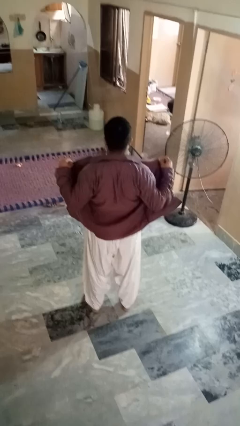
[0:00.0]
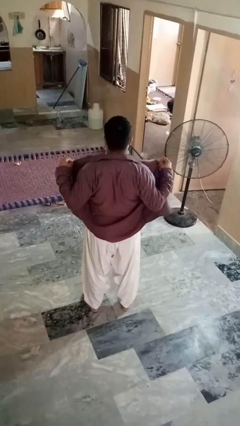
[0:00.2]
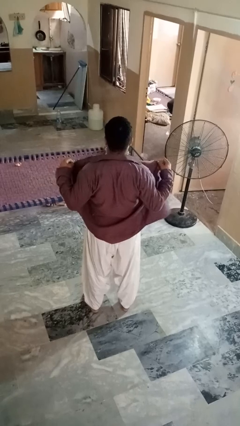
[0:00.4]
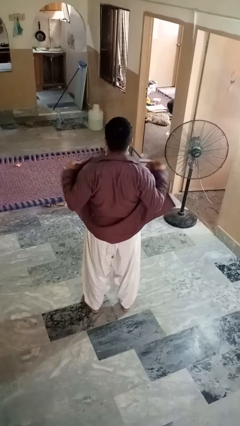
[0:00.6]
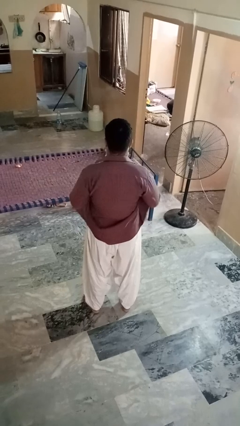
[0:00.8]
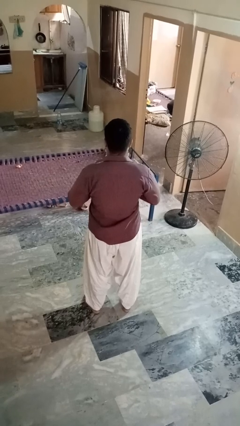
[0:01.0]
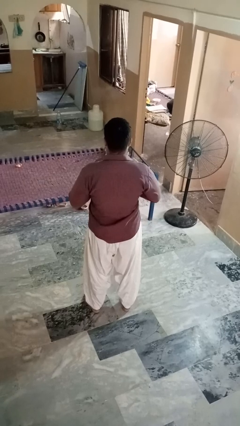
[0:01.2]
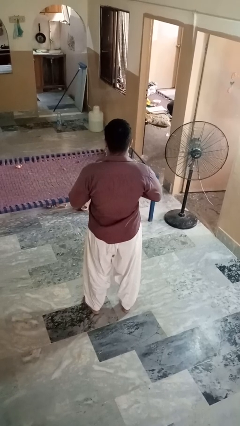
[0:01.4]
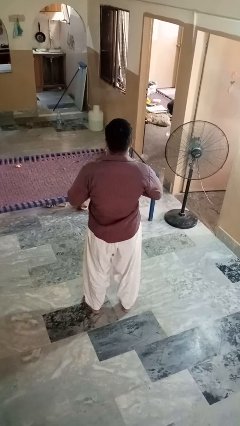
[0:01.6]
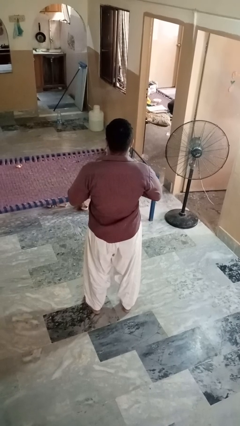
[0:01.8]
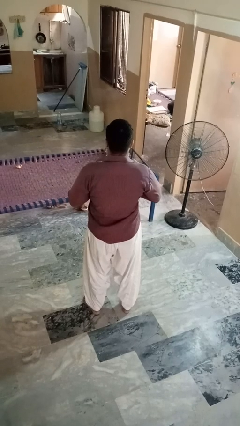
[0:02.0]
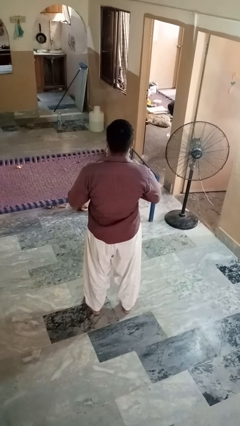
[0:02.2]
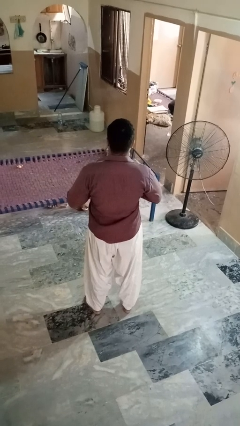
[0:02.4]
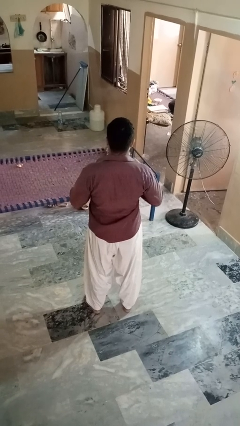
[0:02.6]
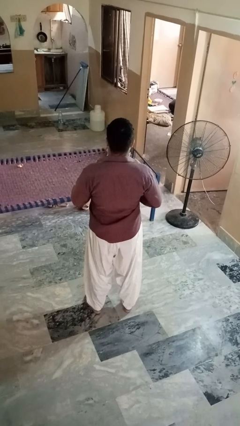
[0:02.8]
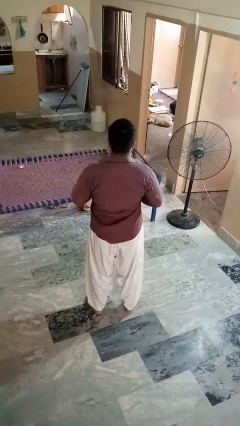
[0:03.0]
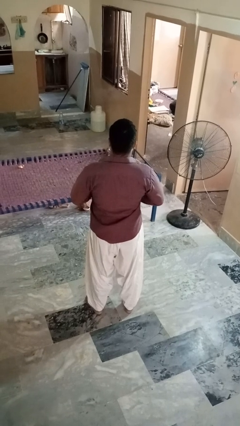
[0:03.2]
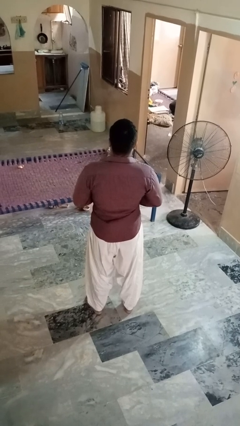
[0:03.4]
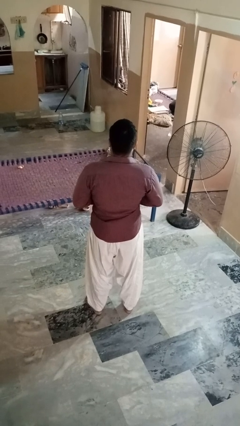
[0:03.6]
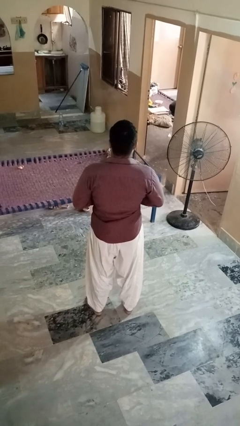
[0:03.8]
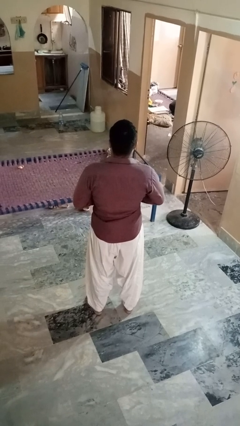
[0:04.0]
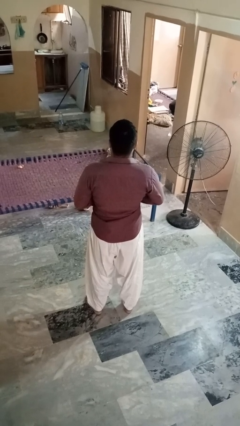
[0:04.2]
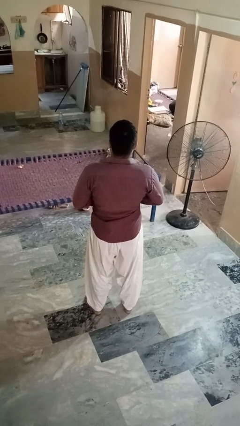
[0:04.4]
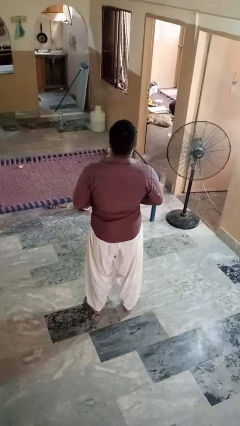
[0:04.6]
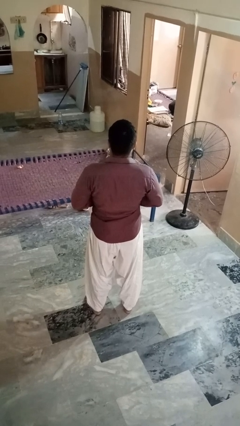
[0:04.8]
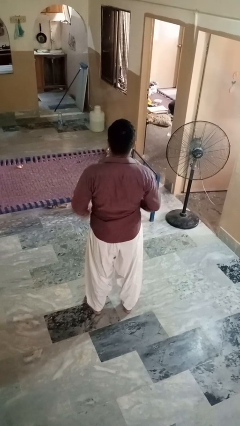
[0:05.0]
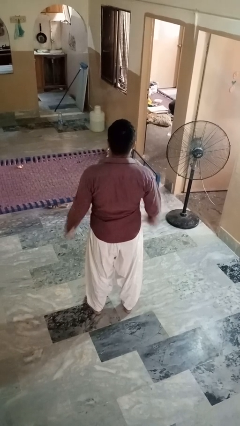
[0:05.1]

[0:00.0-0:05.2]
person buttons shirt

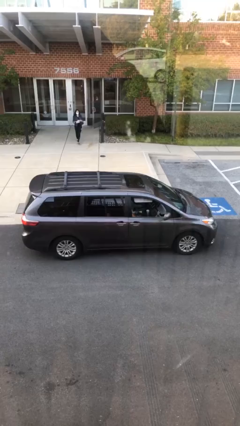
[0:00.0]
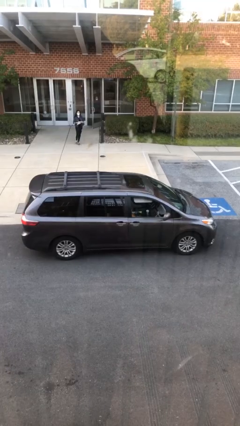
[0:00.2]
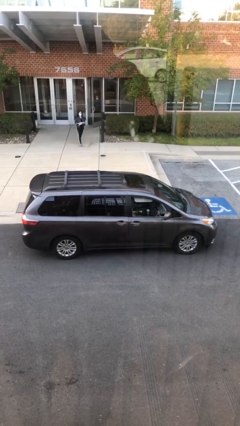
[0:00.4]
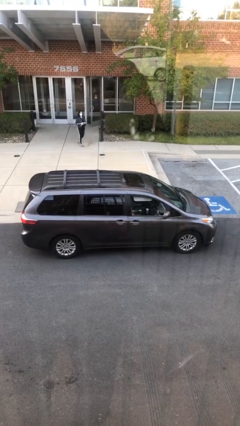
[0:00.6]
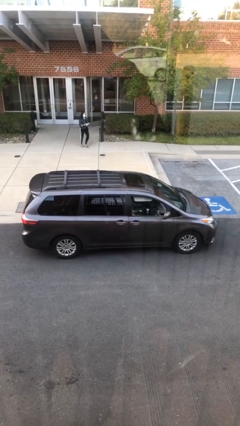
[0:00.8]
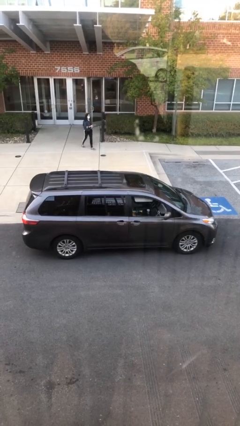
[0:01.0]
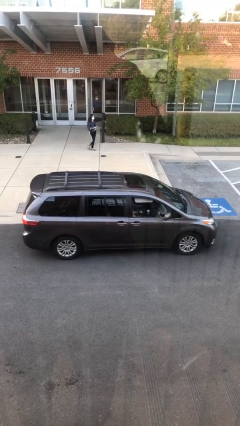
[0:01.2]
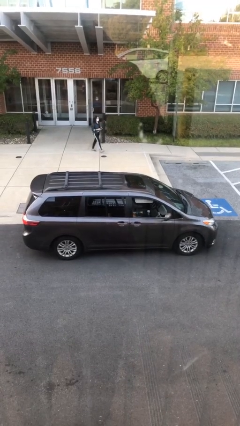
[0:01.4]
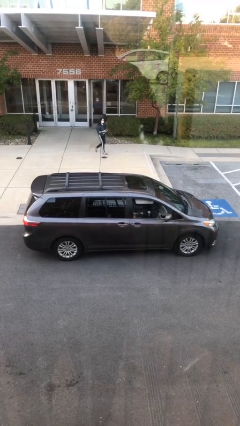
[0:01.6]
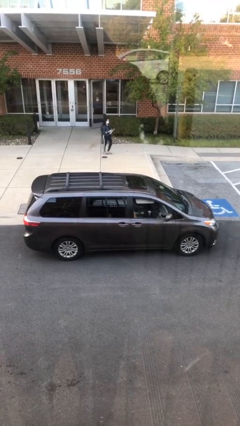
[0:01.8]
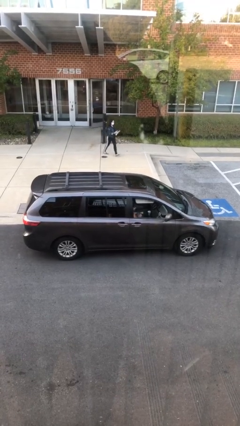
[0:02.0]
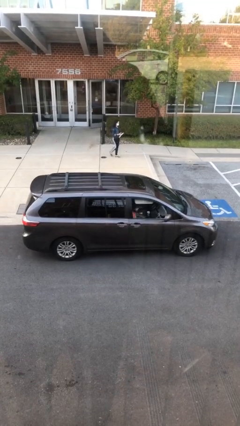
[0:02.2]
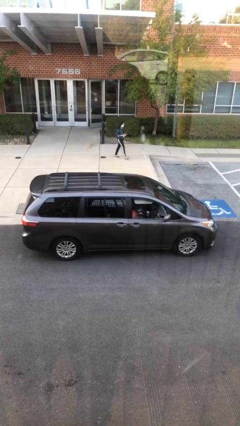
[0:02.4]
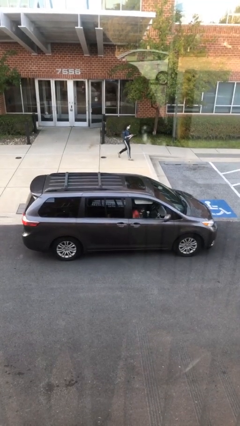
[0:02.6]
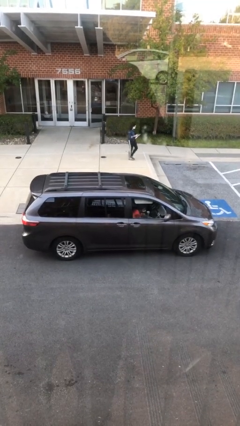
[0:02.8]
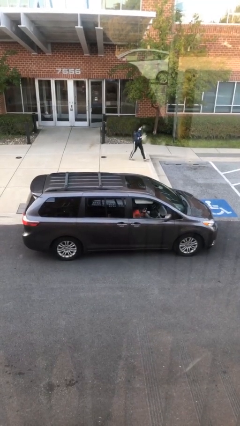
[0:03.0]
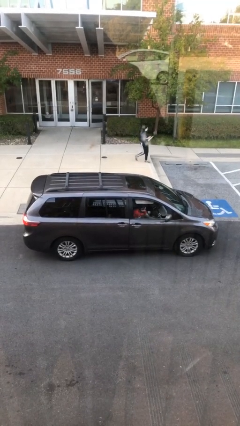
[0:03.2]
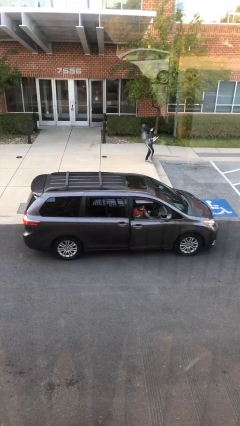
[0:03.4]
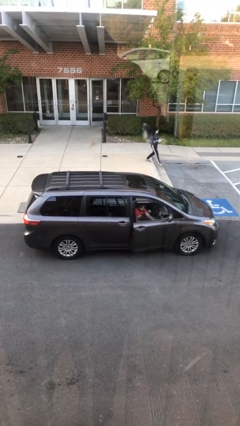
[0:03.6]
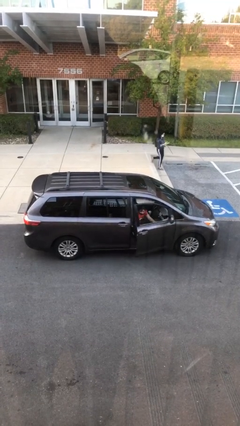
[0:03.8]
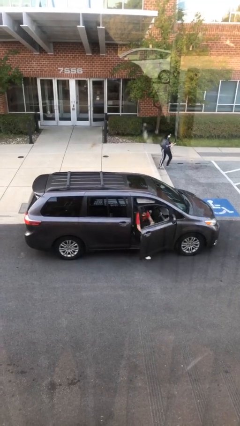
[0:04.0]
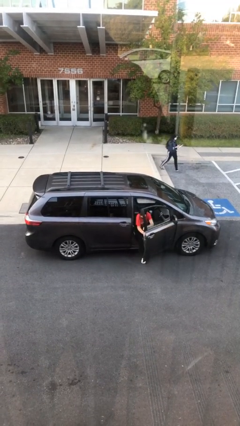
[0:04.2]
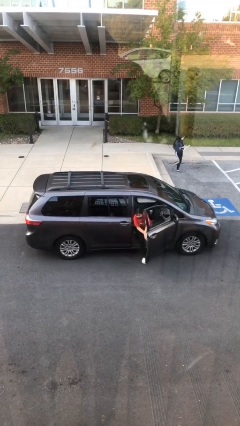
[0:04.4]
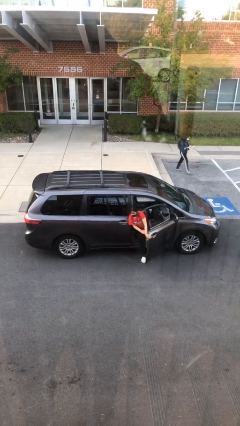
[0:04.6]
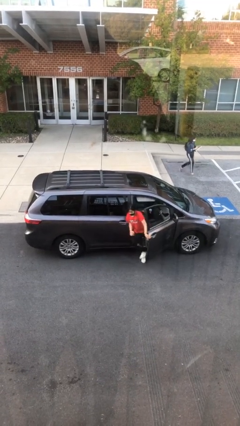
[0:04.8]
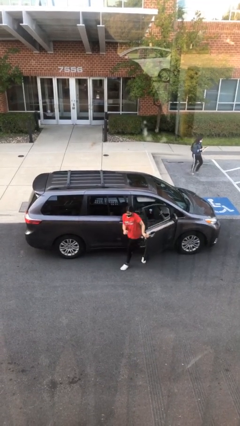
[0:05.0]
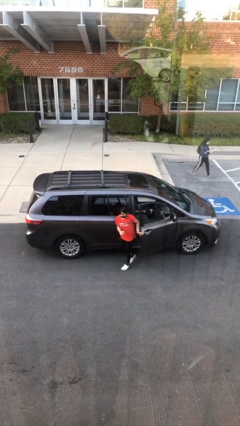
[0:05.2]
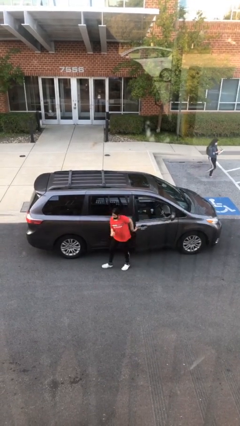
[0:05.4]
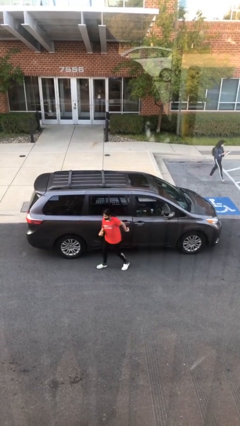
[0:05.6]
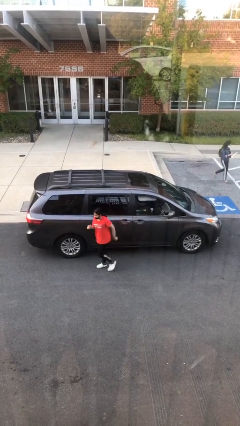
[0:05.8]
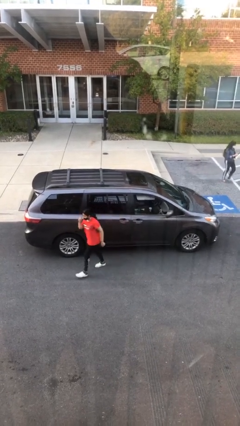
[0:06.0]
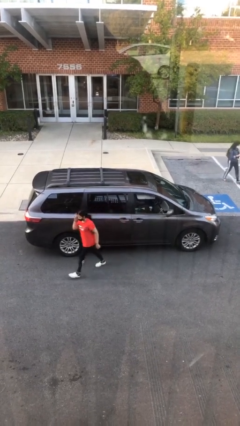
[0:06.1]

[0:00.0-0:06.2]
car drops off person

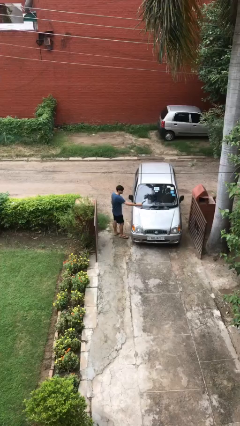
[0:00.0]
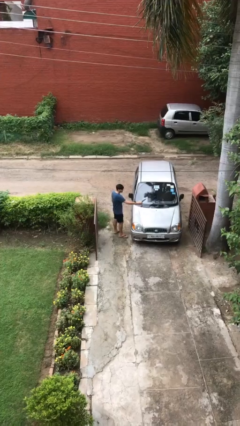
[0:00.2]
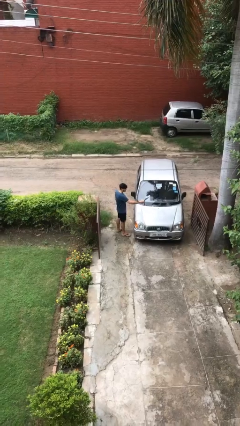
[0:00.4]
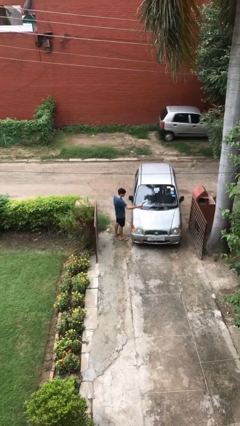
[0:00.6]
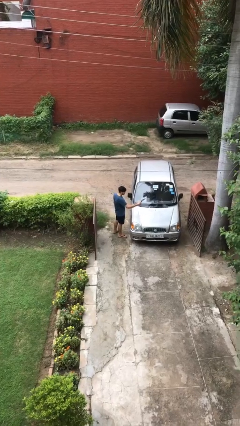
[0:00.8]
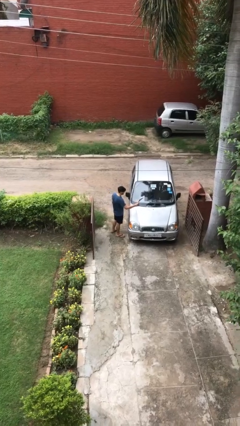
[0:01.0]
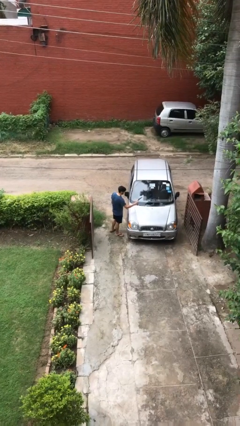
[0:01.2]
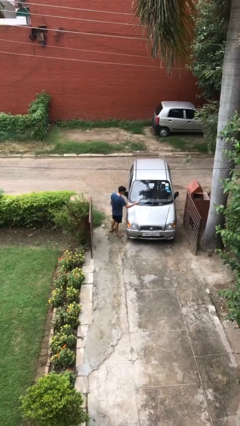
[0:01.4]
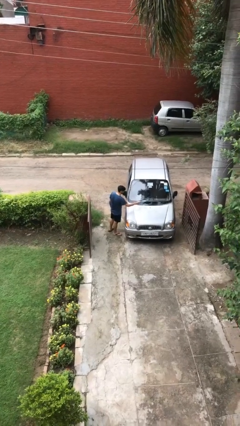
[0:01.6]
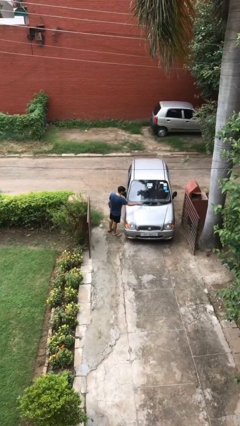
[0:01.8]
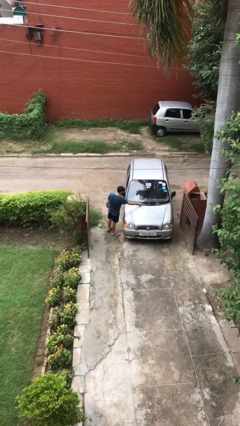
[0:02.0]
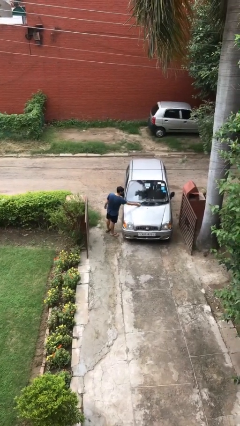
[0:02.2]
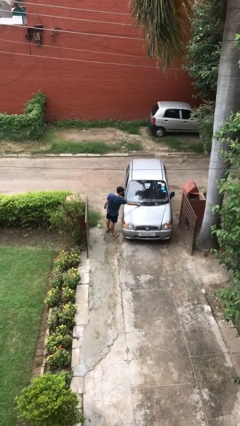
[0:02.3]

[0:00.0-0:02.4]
person flips down car wipers

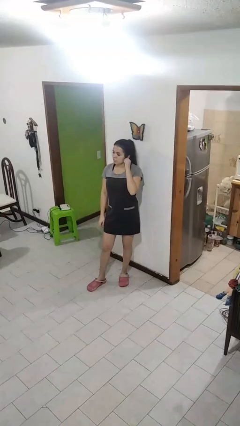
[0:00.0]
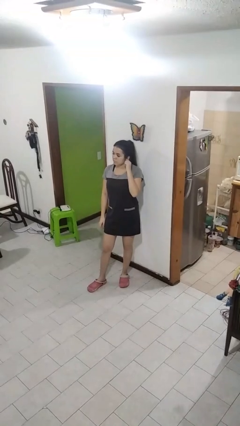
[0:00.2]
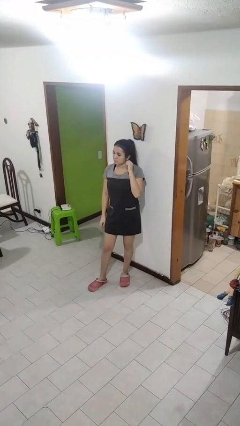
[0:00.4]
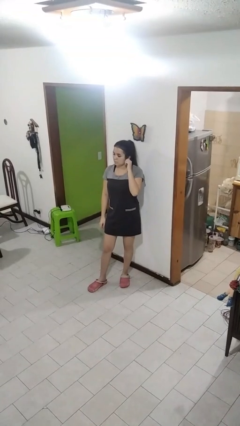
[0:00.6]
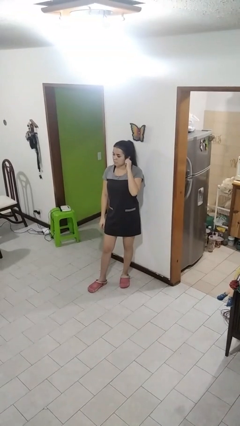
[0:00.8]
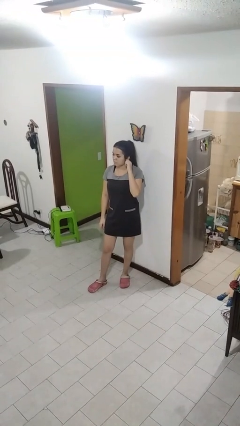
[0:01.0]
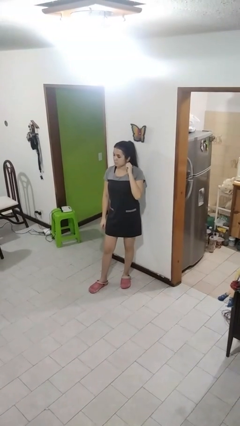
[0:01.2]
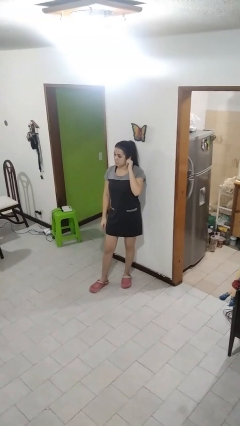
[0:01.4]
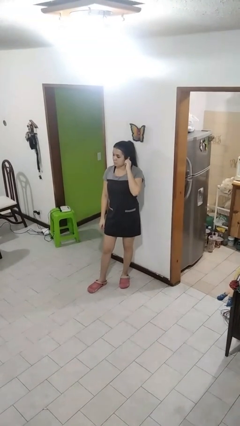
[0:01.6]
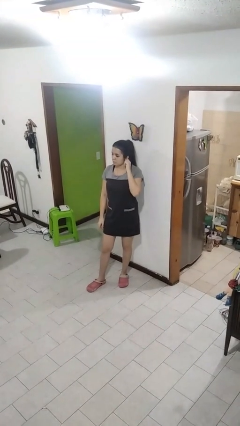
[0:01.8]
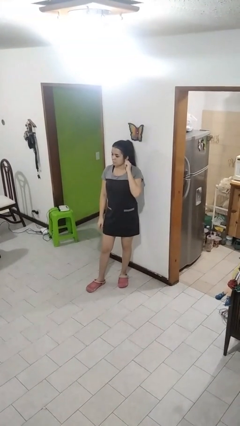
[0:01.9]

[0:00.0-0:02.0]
person touches earlobe

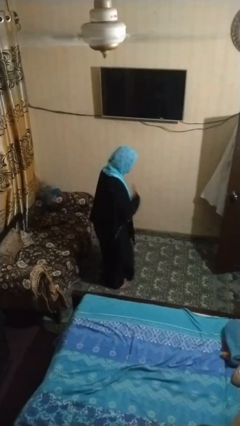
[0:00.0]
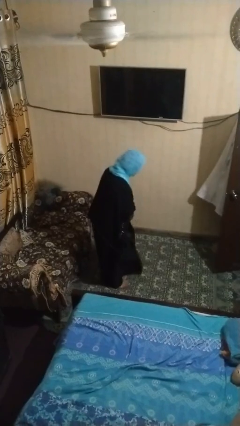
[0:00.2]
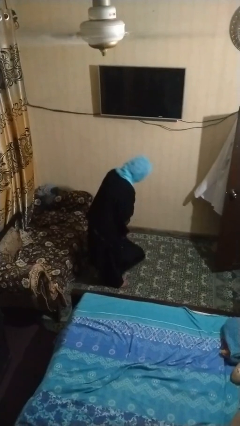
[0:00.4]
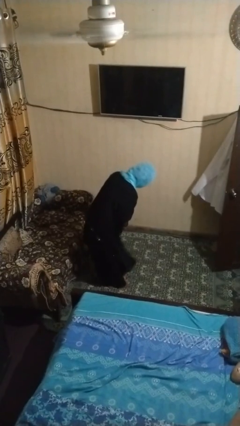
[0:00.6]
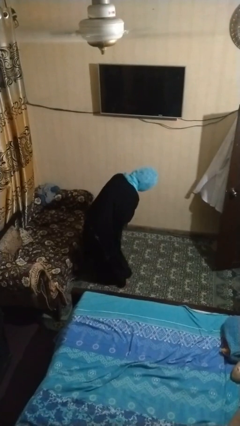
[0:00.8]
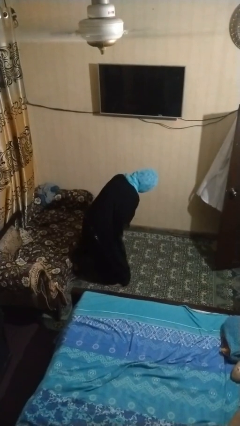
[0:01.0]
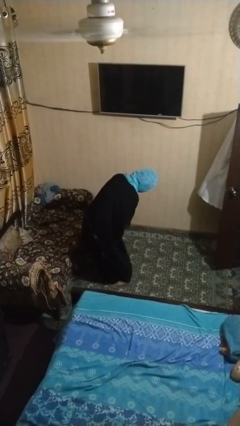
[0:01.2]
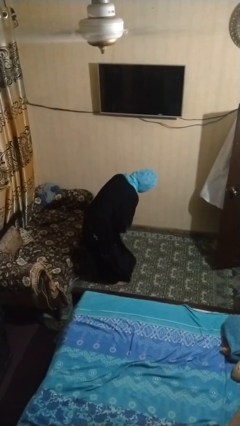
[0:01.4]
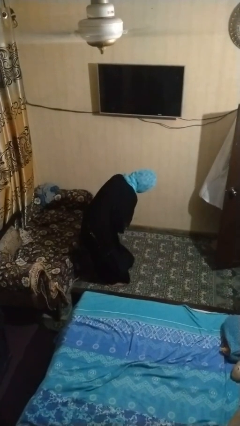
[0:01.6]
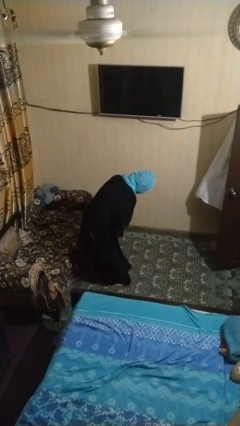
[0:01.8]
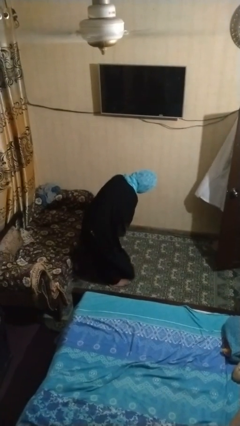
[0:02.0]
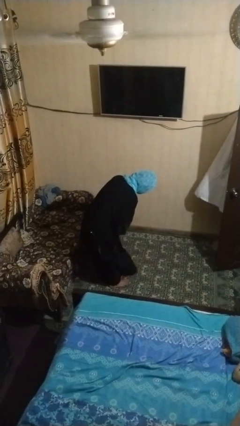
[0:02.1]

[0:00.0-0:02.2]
person bows
